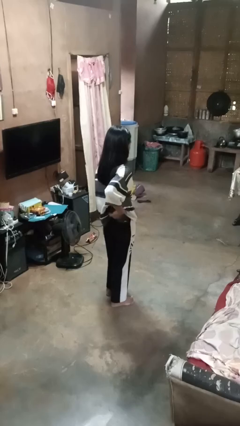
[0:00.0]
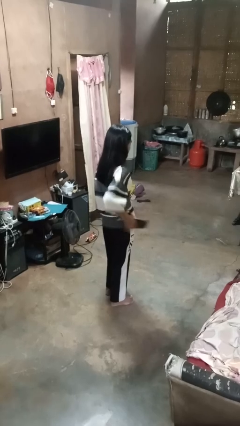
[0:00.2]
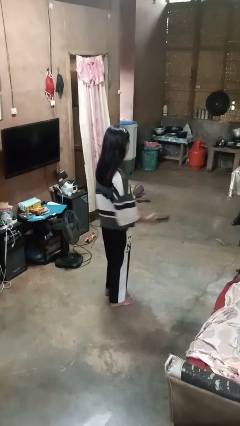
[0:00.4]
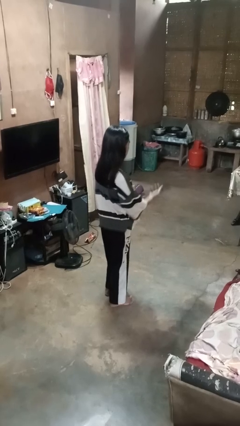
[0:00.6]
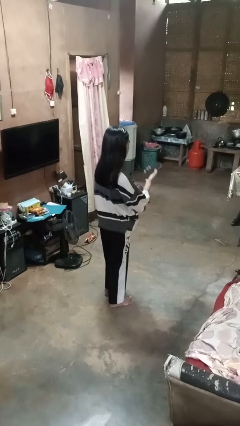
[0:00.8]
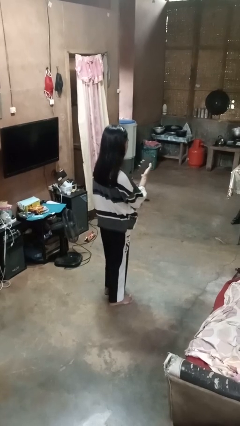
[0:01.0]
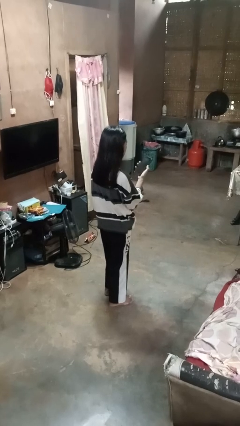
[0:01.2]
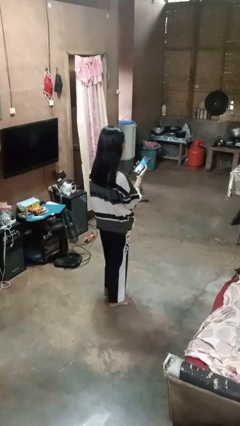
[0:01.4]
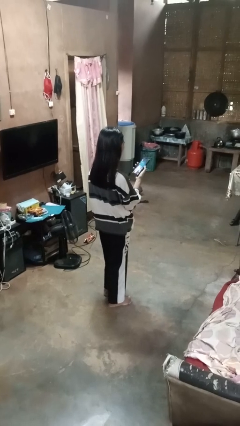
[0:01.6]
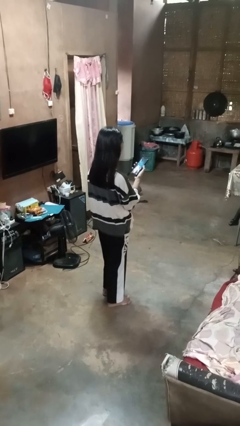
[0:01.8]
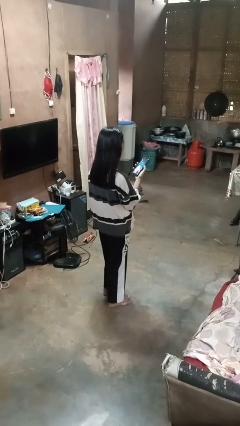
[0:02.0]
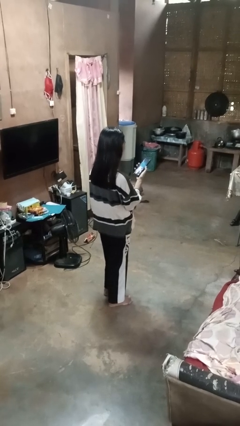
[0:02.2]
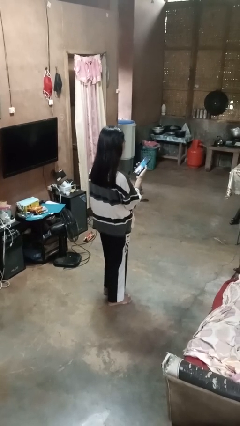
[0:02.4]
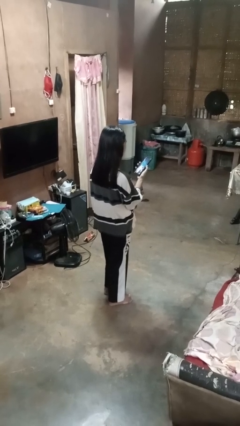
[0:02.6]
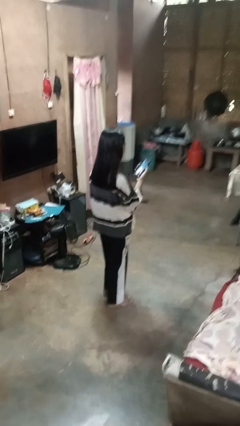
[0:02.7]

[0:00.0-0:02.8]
person takes phone from pocket

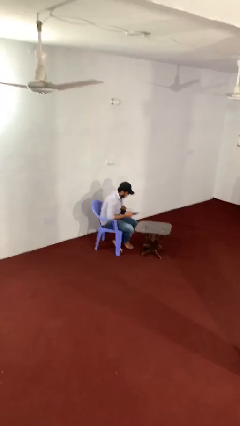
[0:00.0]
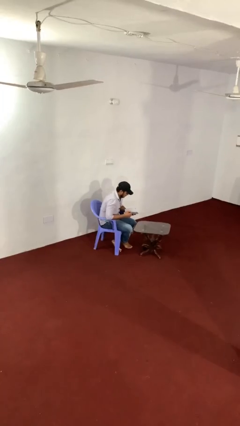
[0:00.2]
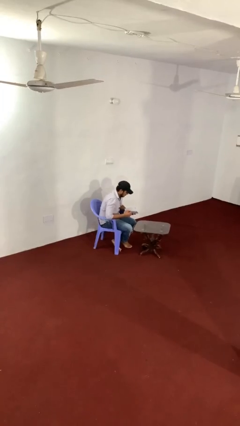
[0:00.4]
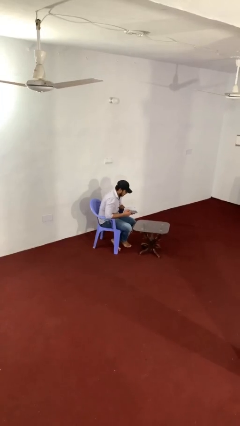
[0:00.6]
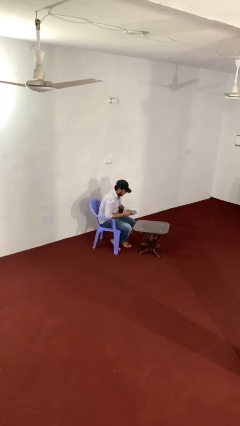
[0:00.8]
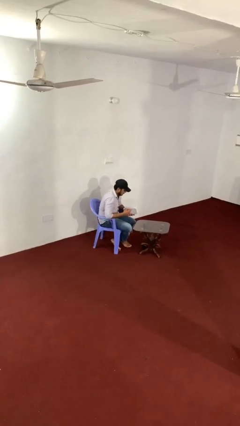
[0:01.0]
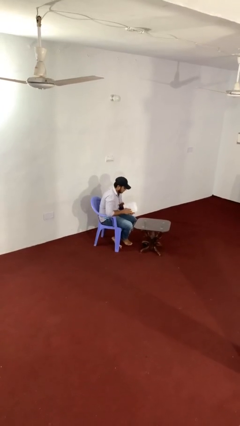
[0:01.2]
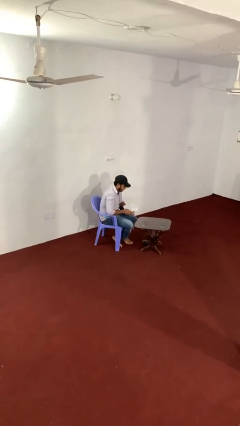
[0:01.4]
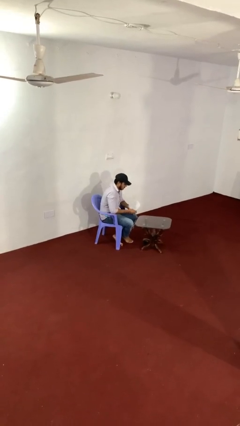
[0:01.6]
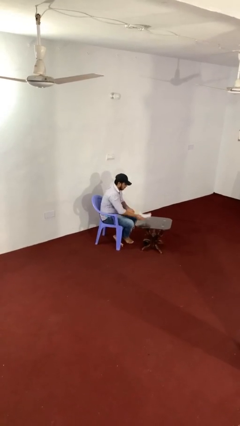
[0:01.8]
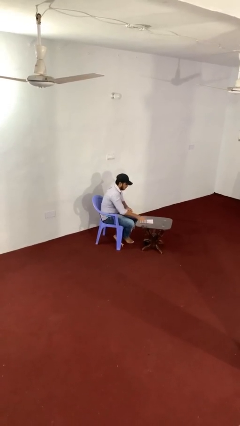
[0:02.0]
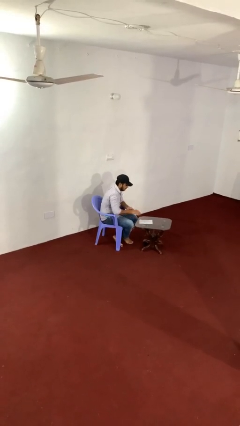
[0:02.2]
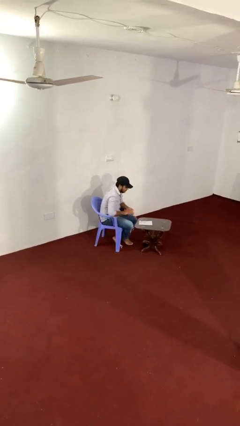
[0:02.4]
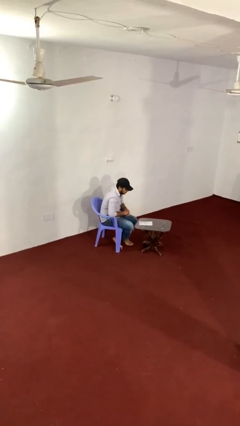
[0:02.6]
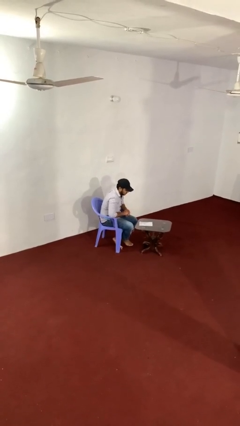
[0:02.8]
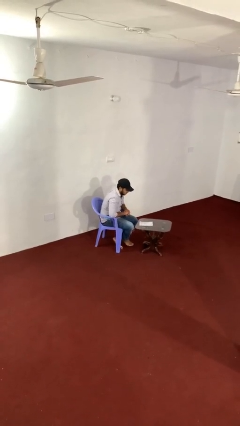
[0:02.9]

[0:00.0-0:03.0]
person puts down object on table

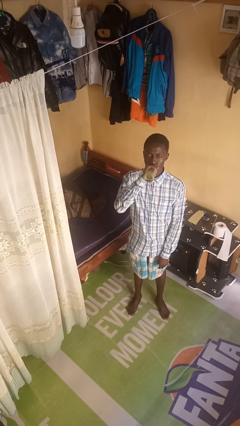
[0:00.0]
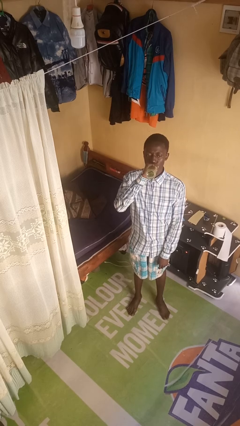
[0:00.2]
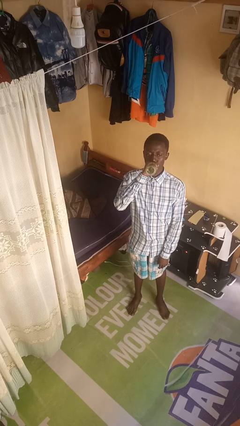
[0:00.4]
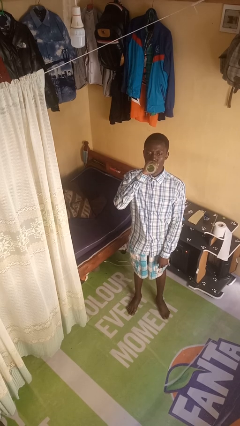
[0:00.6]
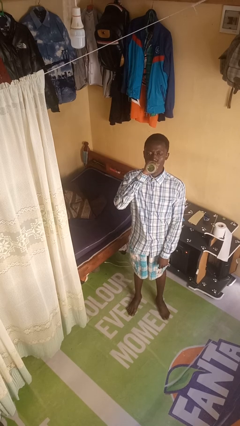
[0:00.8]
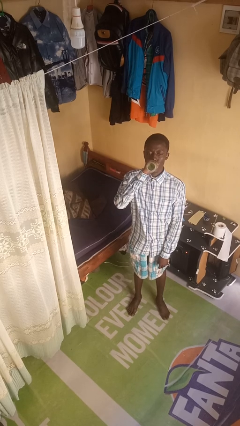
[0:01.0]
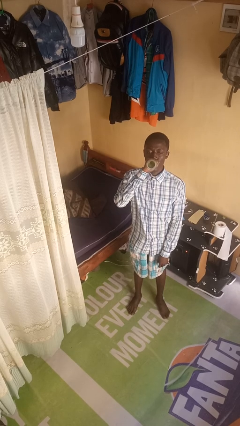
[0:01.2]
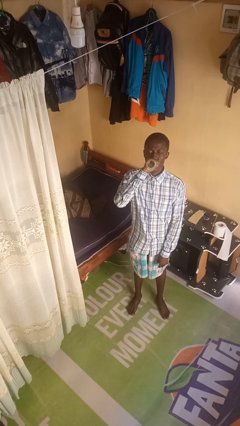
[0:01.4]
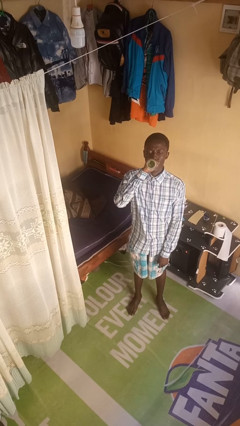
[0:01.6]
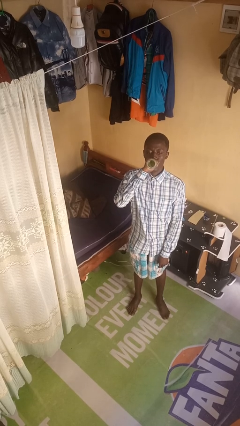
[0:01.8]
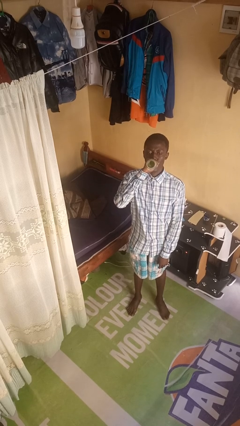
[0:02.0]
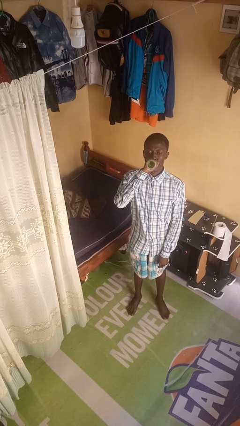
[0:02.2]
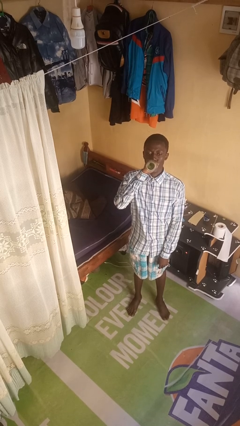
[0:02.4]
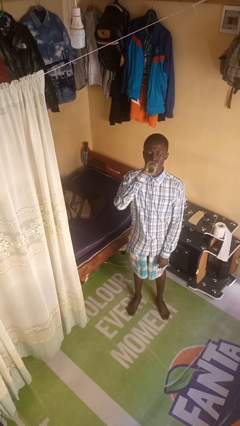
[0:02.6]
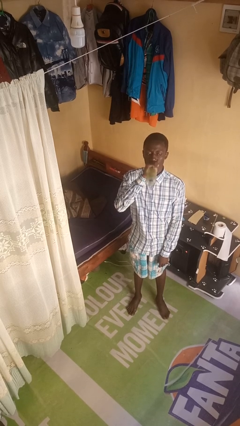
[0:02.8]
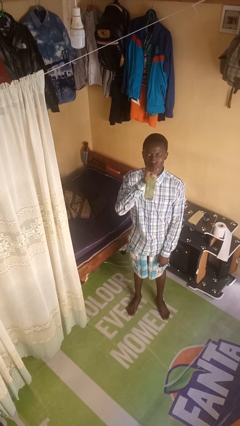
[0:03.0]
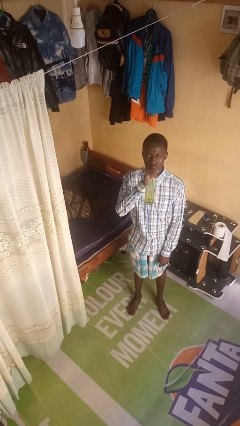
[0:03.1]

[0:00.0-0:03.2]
person drinks from bottle

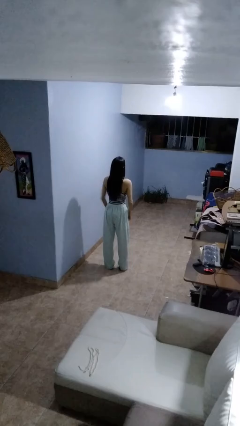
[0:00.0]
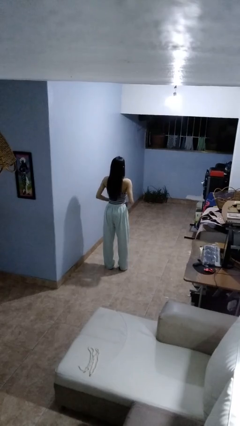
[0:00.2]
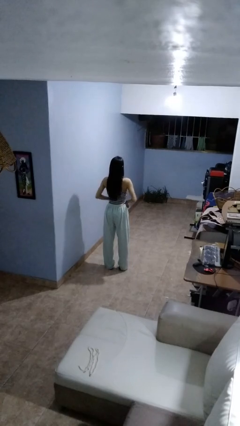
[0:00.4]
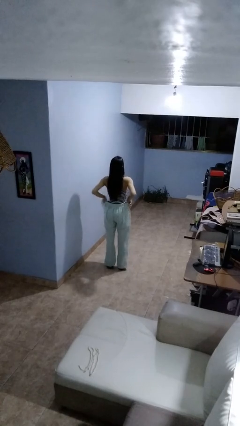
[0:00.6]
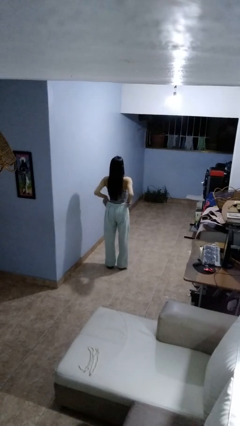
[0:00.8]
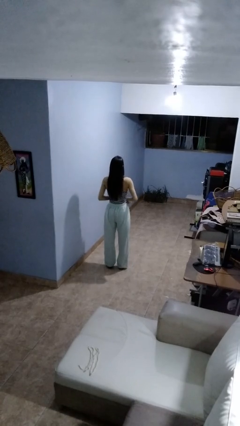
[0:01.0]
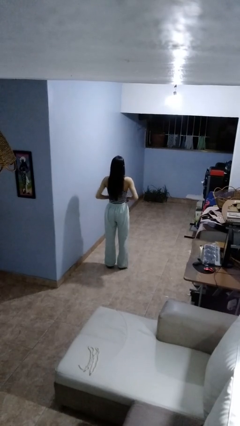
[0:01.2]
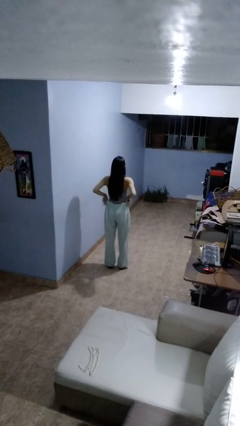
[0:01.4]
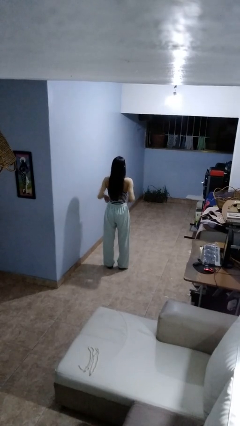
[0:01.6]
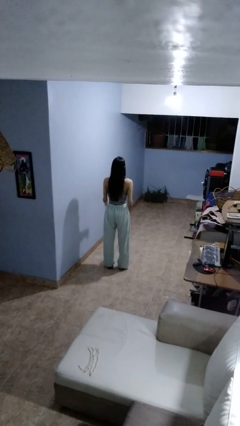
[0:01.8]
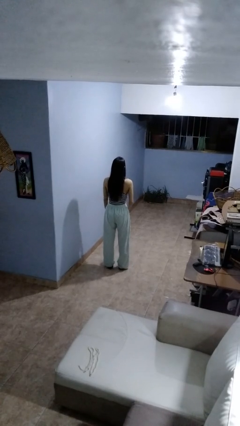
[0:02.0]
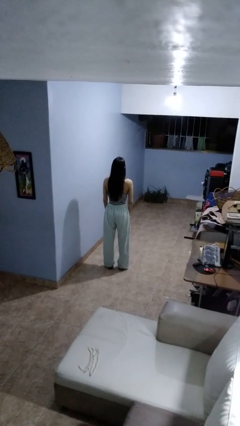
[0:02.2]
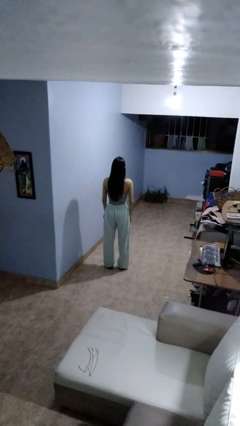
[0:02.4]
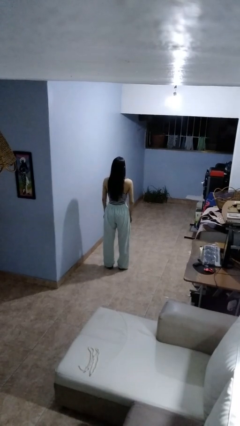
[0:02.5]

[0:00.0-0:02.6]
person hikes up pants

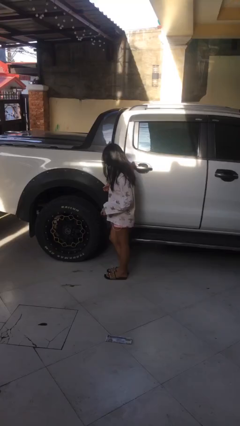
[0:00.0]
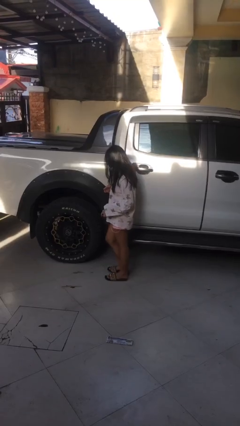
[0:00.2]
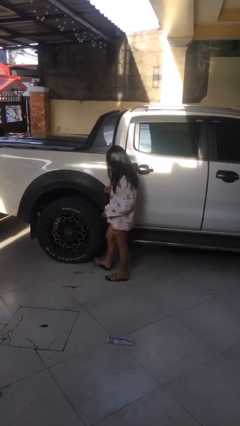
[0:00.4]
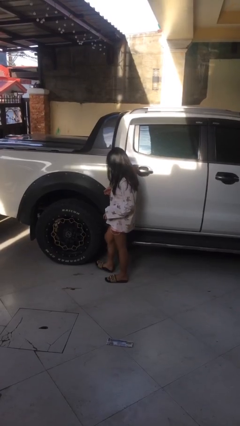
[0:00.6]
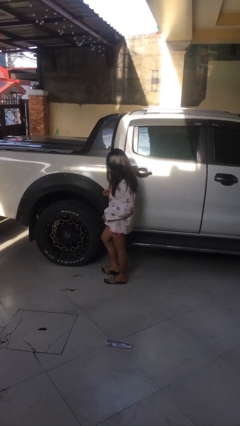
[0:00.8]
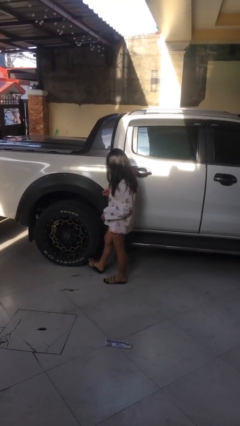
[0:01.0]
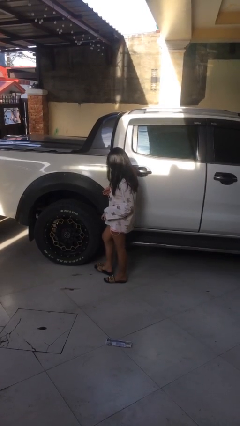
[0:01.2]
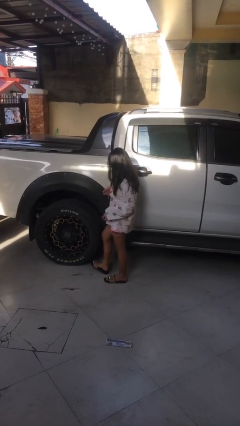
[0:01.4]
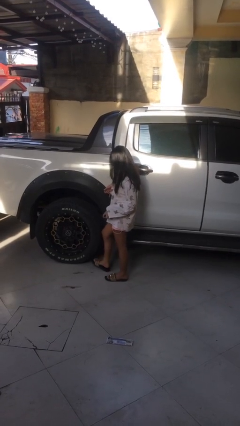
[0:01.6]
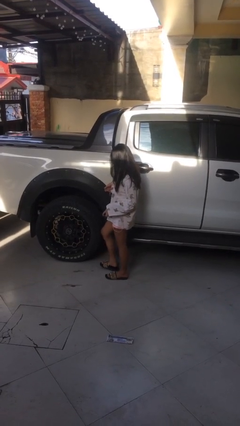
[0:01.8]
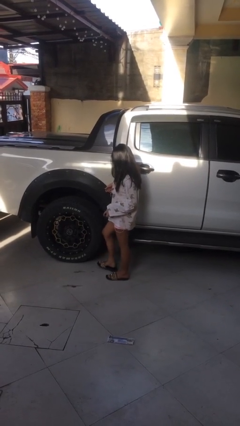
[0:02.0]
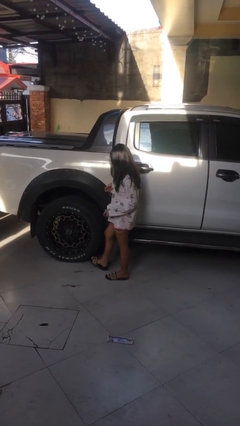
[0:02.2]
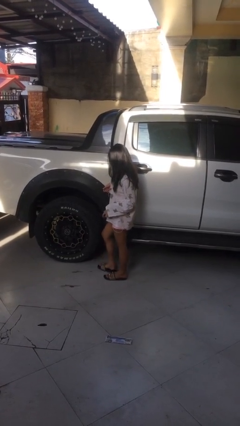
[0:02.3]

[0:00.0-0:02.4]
person kicks car tires

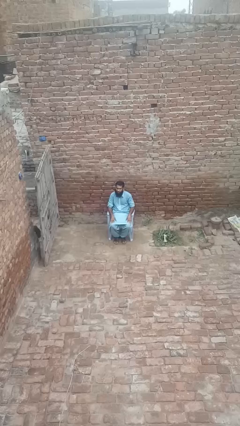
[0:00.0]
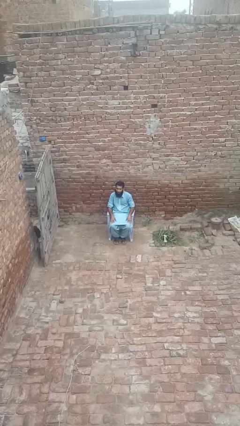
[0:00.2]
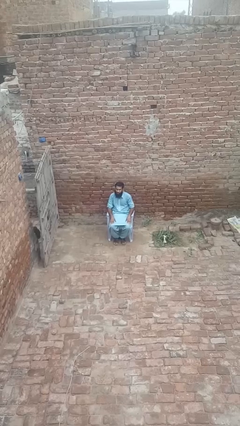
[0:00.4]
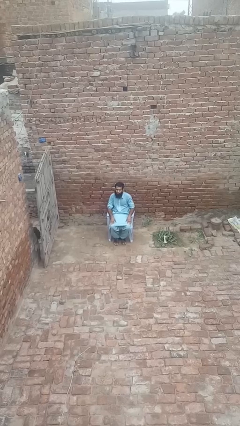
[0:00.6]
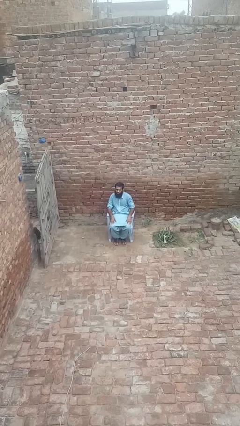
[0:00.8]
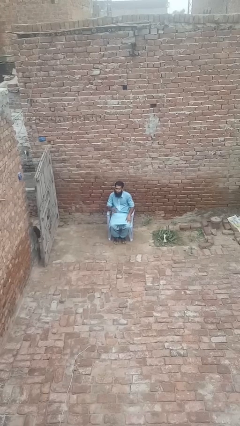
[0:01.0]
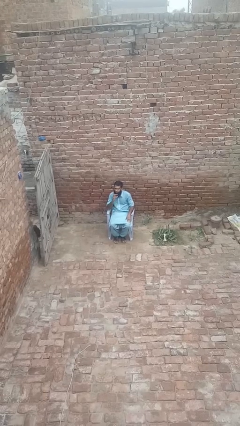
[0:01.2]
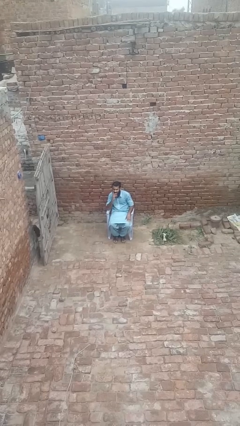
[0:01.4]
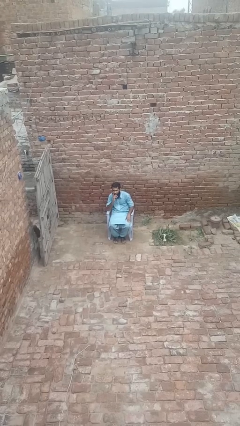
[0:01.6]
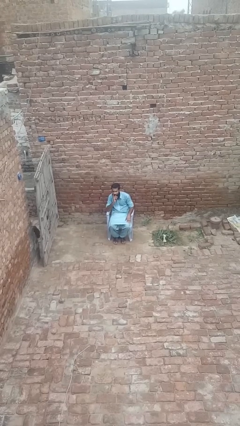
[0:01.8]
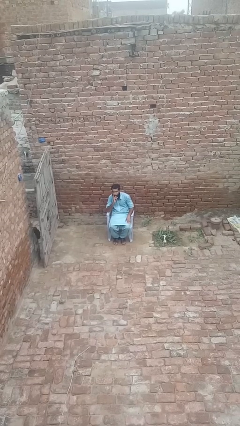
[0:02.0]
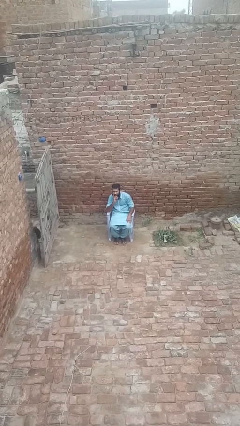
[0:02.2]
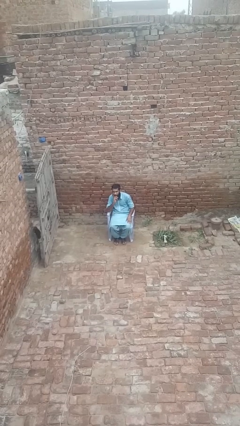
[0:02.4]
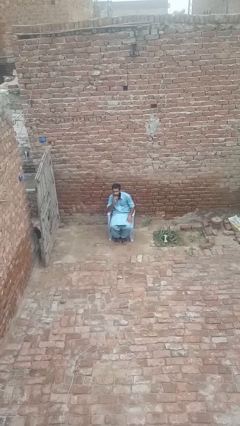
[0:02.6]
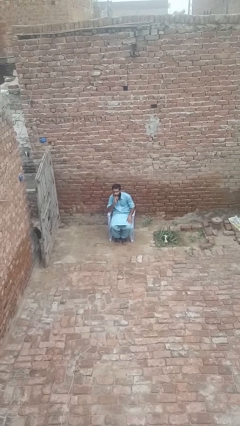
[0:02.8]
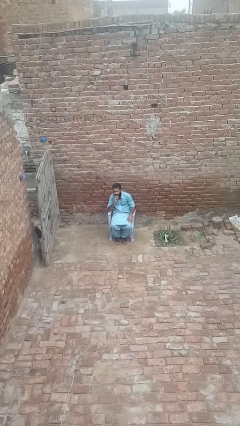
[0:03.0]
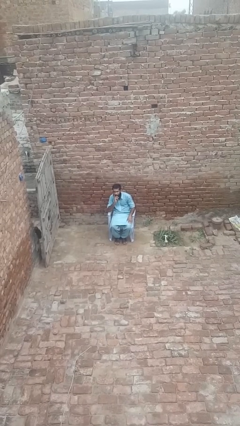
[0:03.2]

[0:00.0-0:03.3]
person strokes chin
